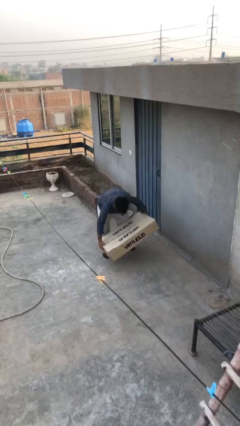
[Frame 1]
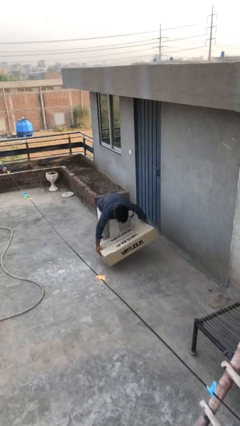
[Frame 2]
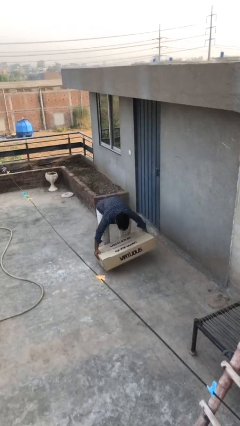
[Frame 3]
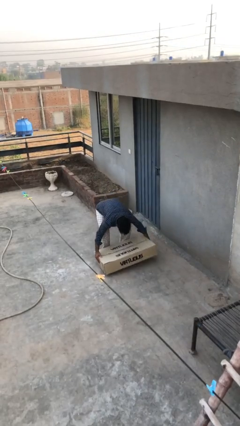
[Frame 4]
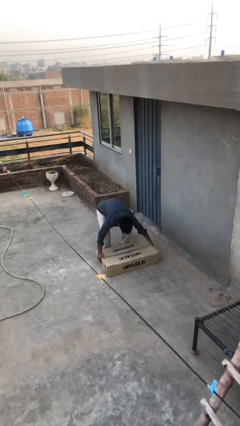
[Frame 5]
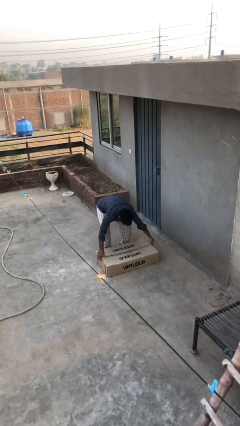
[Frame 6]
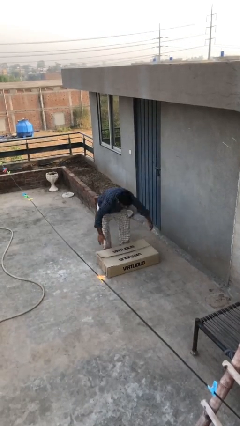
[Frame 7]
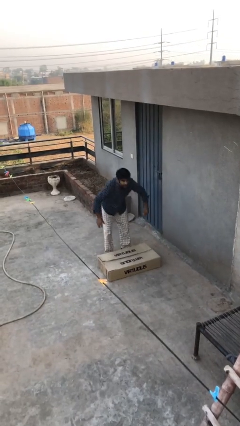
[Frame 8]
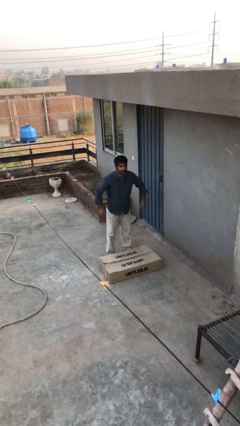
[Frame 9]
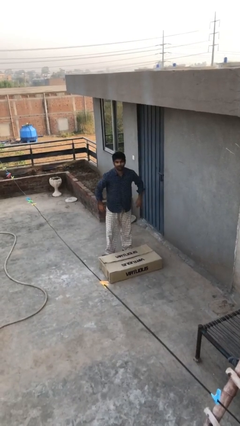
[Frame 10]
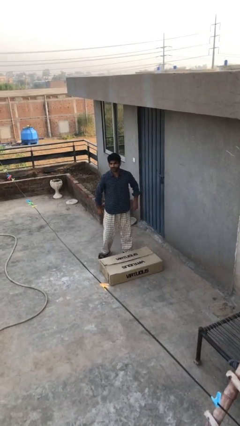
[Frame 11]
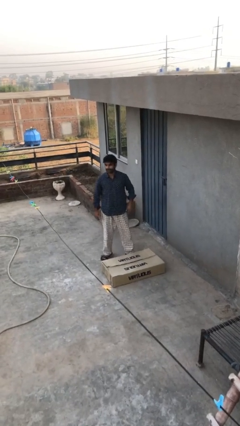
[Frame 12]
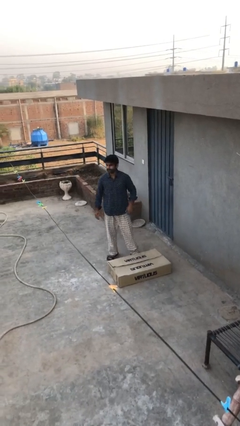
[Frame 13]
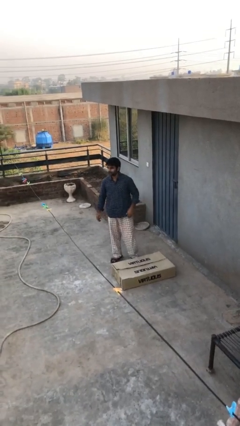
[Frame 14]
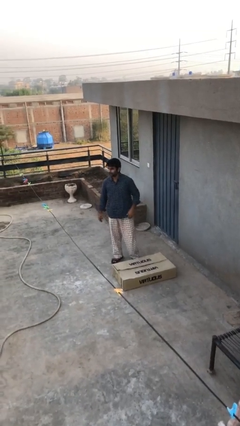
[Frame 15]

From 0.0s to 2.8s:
person puts down object on floor

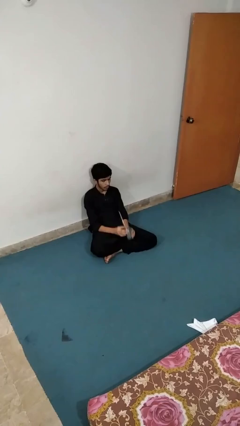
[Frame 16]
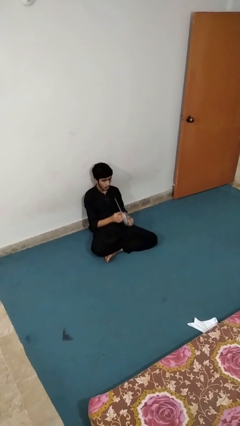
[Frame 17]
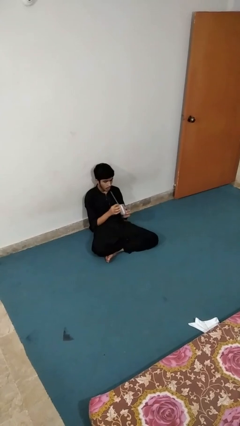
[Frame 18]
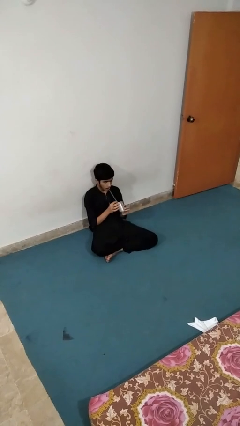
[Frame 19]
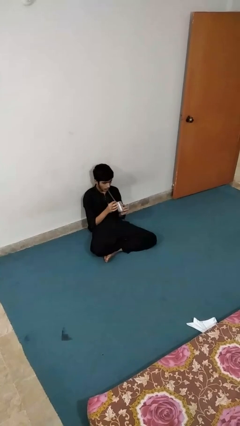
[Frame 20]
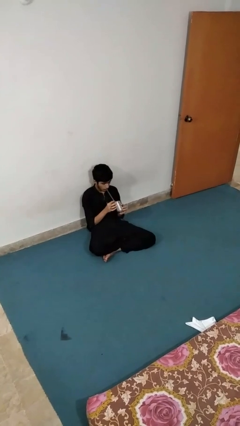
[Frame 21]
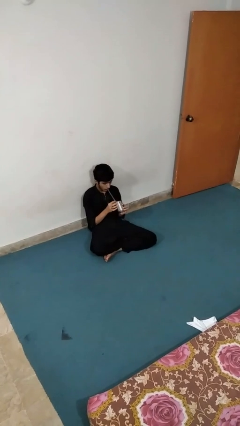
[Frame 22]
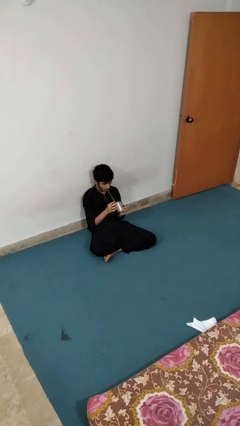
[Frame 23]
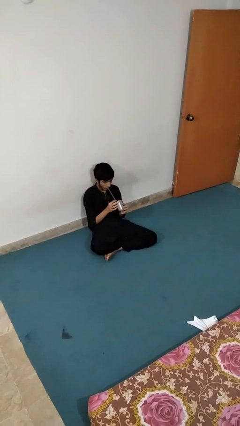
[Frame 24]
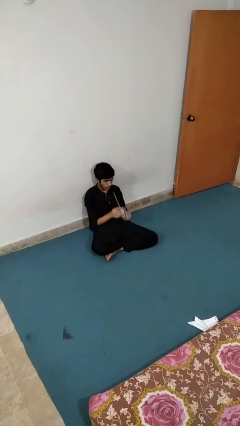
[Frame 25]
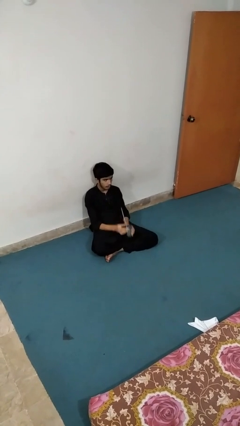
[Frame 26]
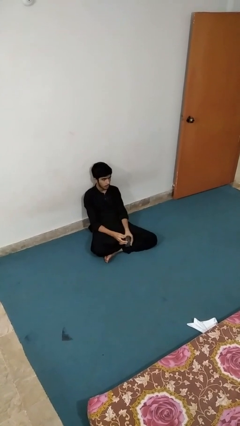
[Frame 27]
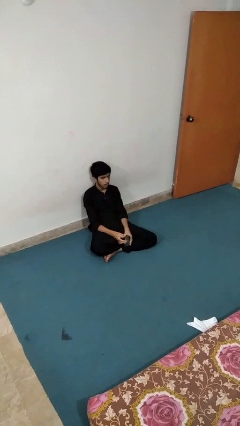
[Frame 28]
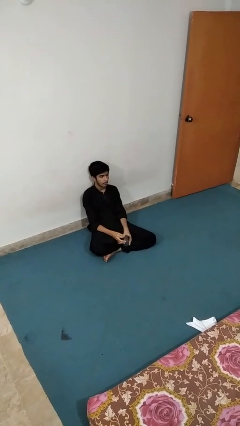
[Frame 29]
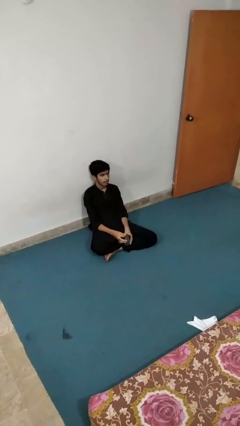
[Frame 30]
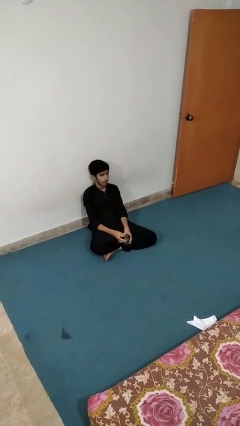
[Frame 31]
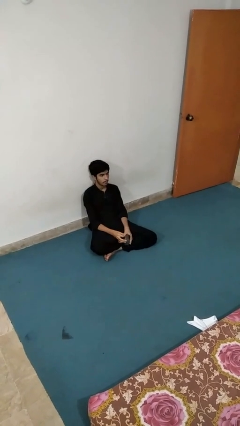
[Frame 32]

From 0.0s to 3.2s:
person drinks from straw

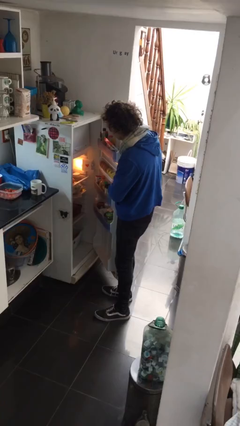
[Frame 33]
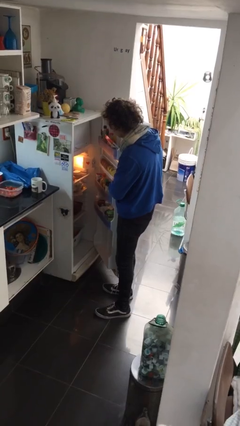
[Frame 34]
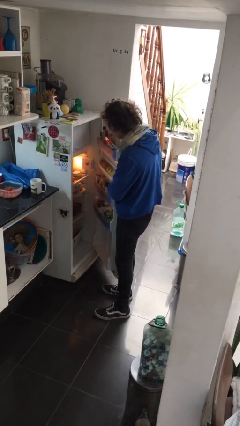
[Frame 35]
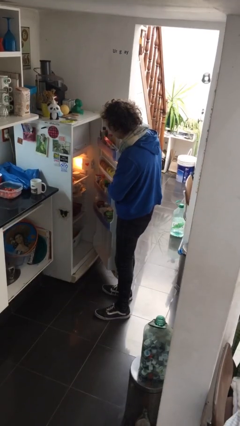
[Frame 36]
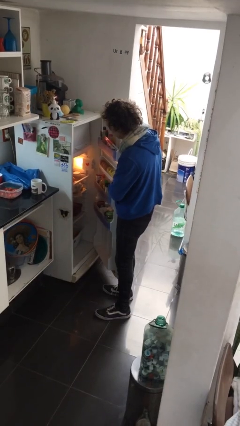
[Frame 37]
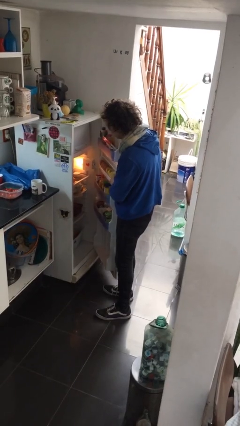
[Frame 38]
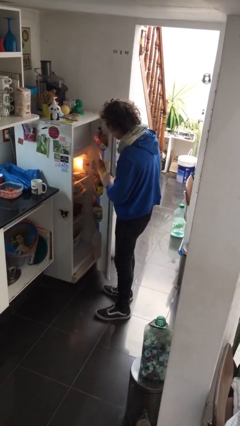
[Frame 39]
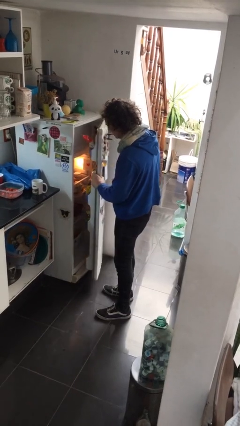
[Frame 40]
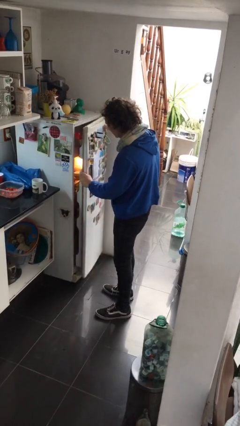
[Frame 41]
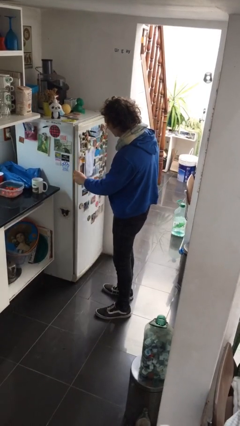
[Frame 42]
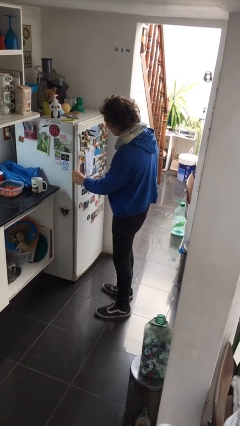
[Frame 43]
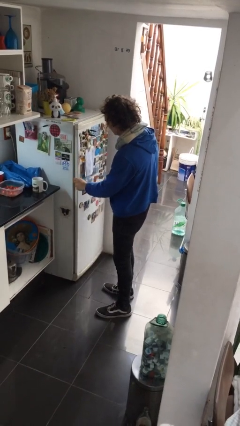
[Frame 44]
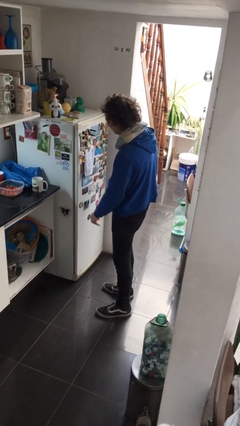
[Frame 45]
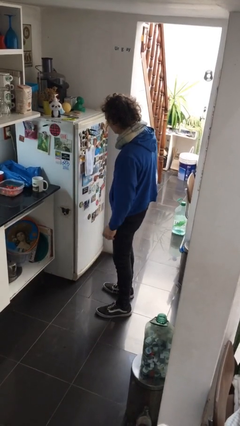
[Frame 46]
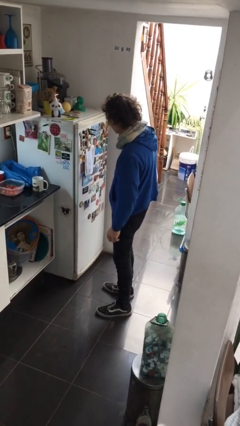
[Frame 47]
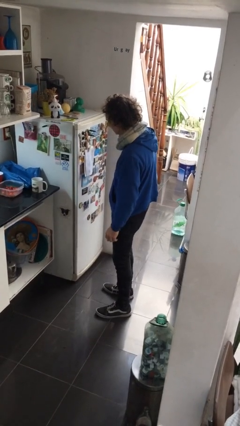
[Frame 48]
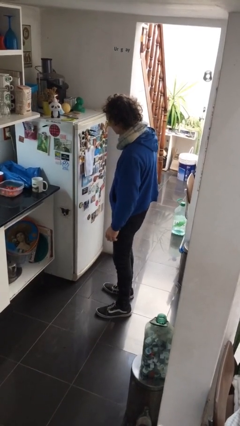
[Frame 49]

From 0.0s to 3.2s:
person closes refrigerator

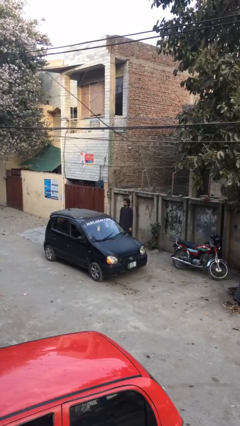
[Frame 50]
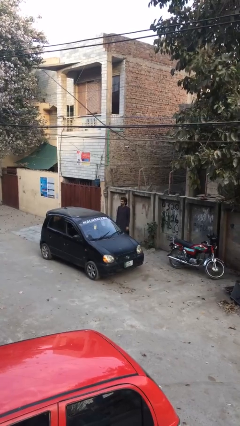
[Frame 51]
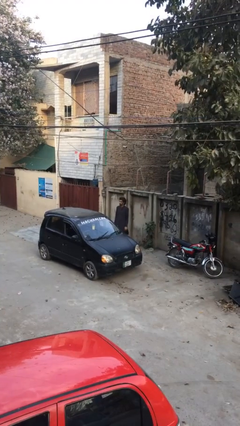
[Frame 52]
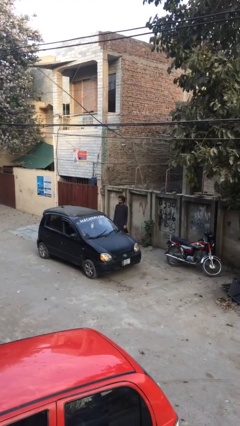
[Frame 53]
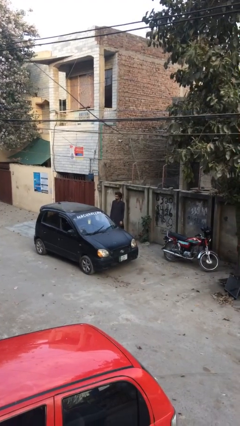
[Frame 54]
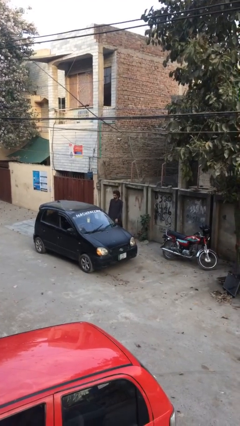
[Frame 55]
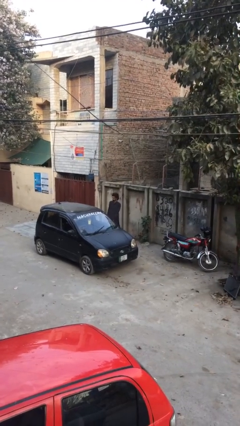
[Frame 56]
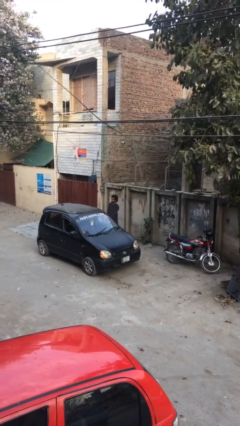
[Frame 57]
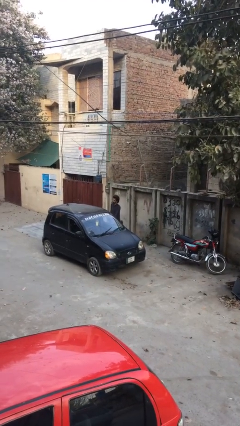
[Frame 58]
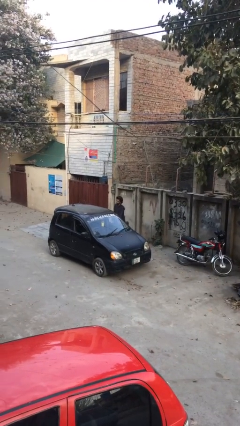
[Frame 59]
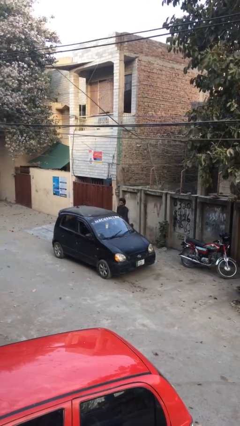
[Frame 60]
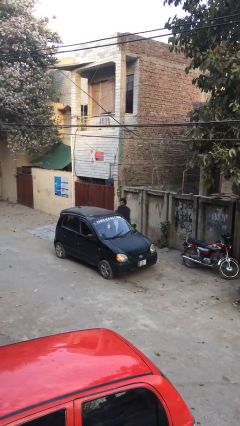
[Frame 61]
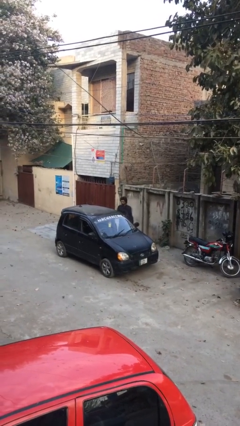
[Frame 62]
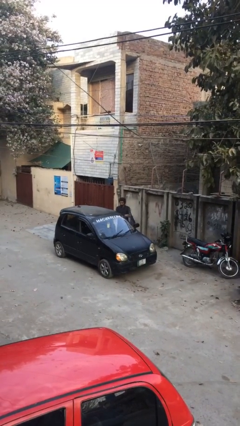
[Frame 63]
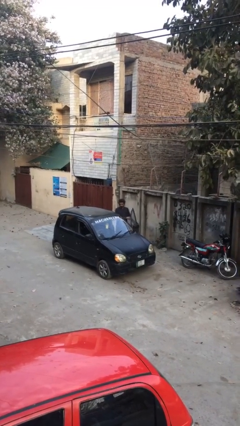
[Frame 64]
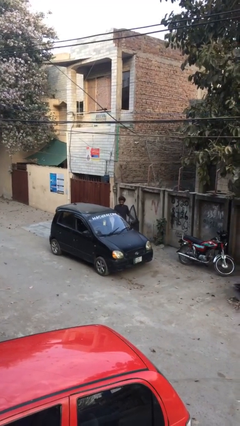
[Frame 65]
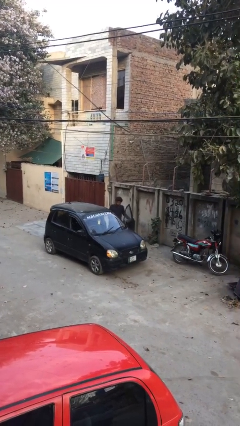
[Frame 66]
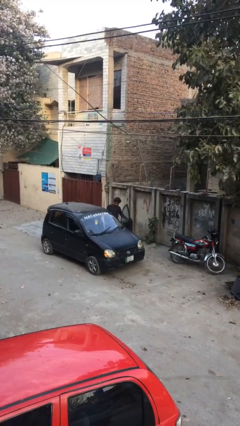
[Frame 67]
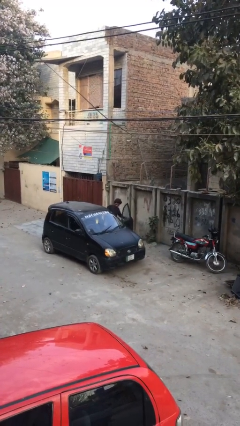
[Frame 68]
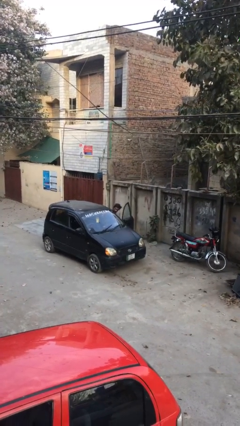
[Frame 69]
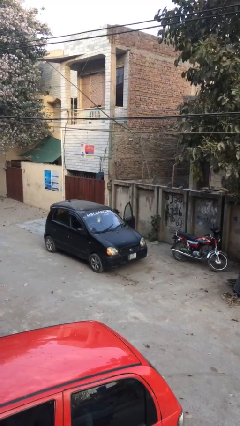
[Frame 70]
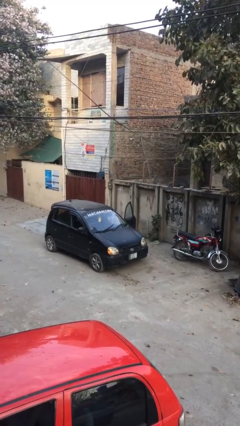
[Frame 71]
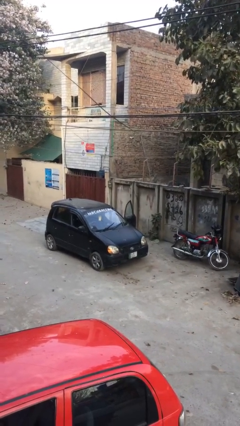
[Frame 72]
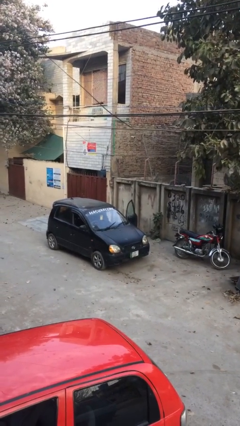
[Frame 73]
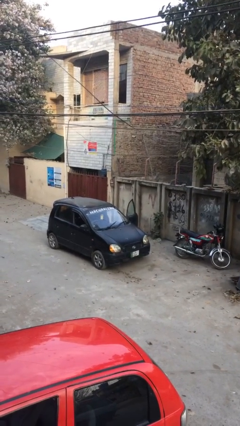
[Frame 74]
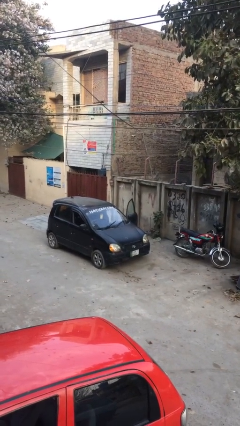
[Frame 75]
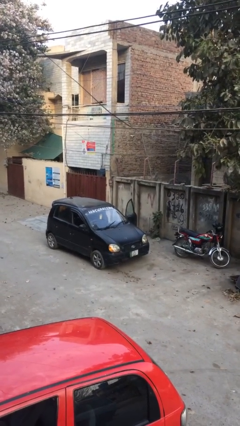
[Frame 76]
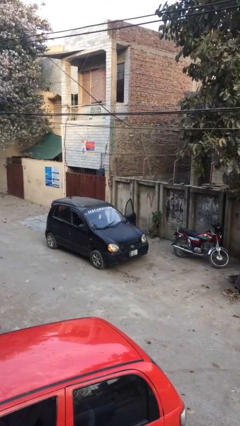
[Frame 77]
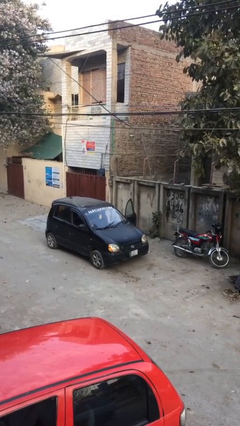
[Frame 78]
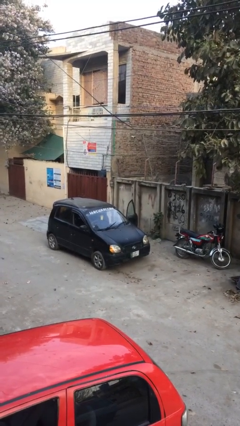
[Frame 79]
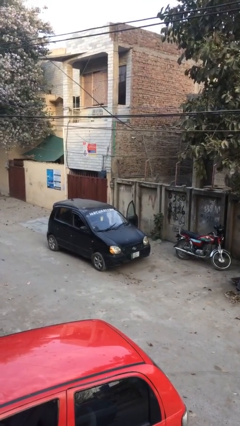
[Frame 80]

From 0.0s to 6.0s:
person enters car

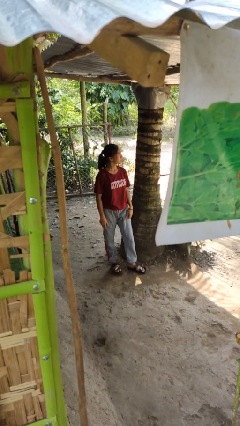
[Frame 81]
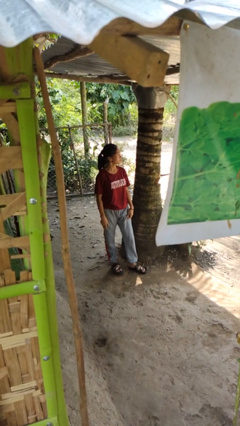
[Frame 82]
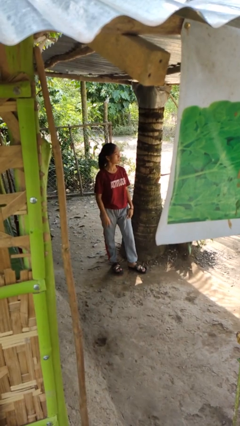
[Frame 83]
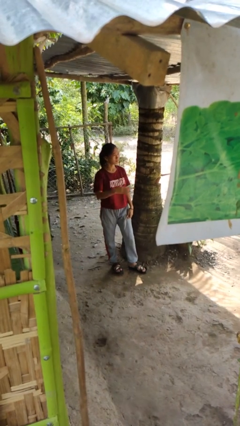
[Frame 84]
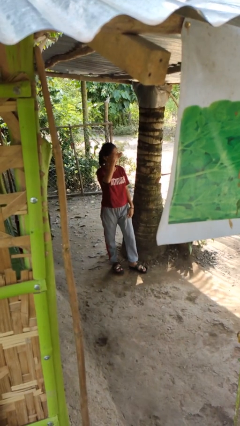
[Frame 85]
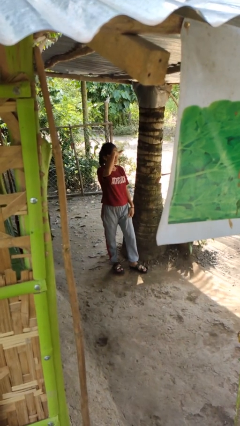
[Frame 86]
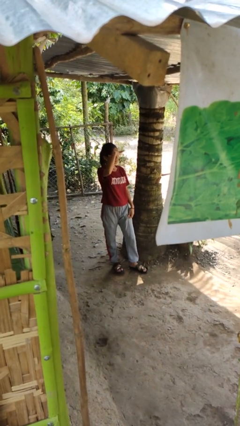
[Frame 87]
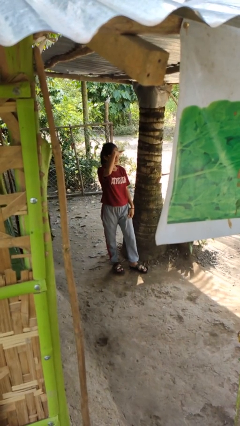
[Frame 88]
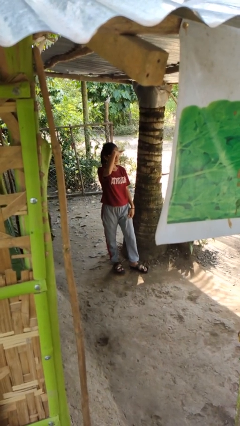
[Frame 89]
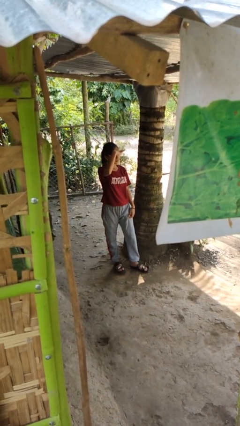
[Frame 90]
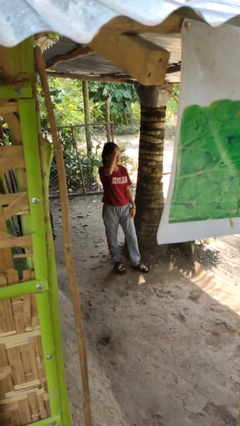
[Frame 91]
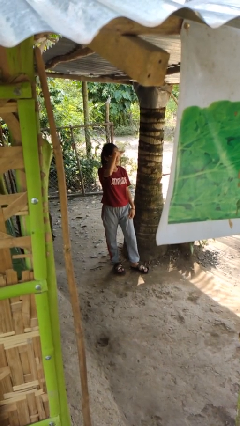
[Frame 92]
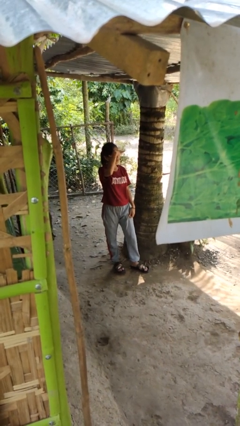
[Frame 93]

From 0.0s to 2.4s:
person shades eyes
